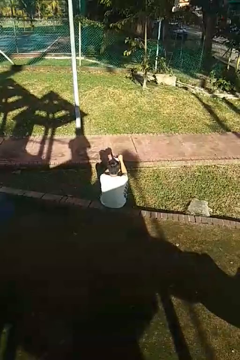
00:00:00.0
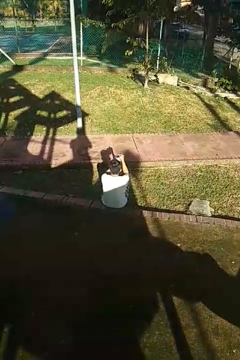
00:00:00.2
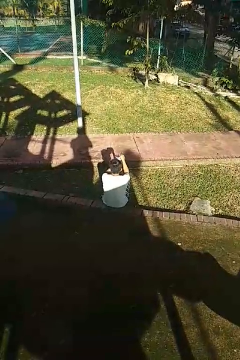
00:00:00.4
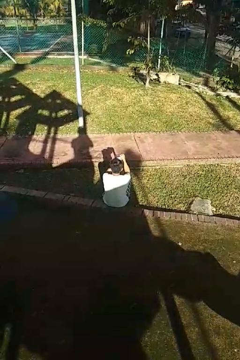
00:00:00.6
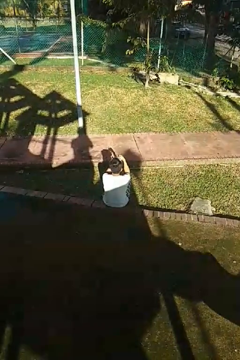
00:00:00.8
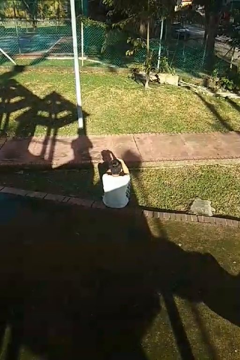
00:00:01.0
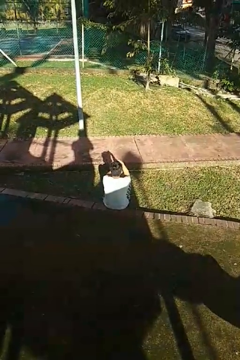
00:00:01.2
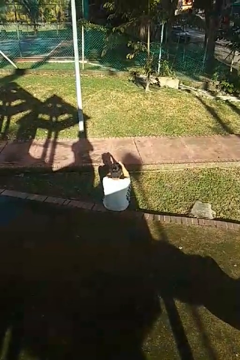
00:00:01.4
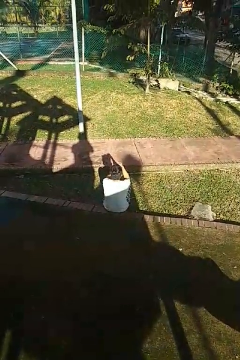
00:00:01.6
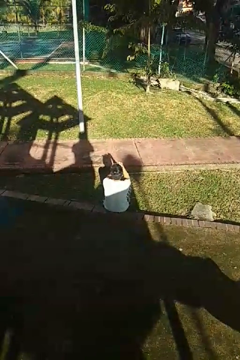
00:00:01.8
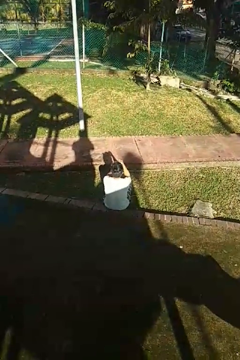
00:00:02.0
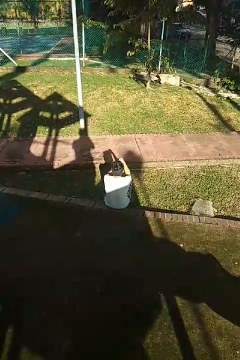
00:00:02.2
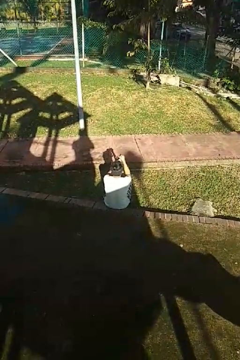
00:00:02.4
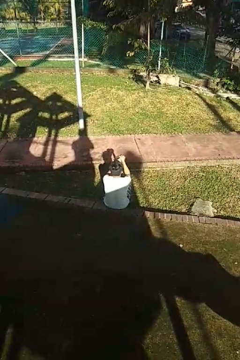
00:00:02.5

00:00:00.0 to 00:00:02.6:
person drinks from mug

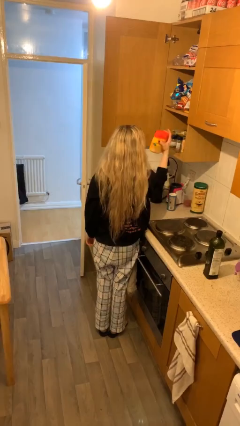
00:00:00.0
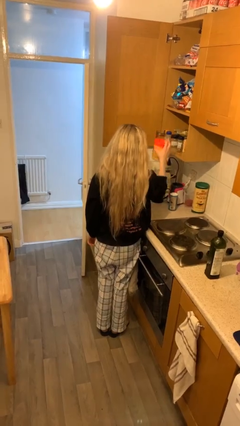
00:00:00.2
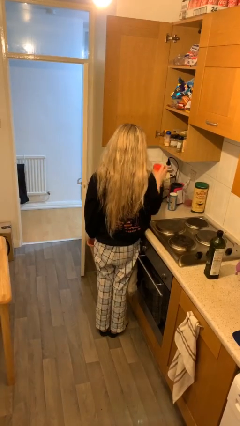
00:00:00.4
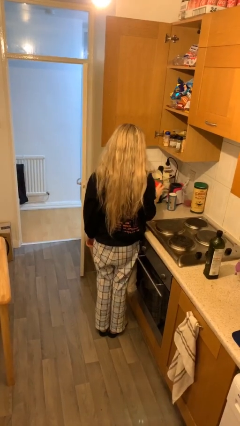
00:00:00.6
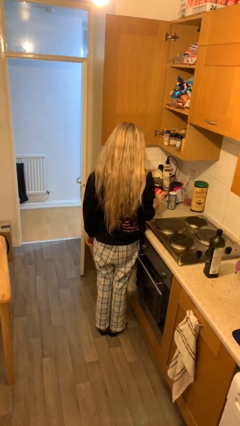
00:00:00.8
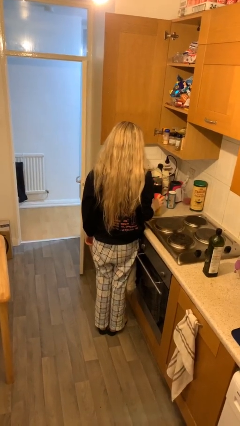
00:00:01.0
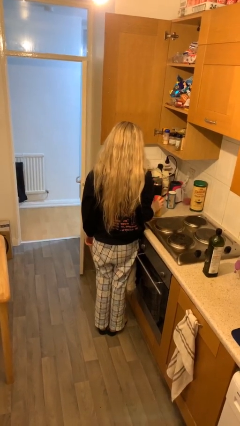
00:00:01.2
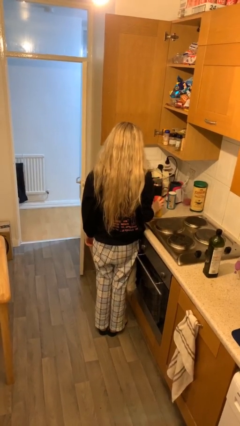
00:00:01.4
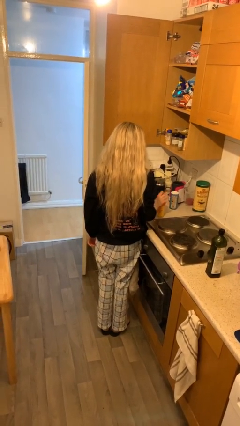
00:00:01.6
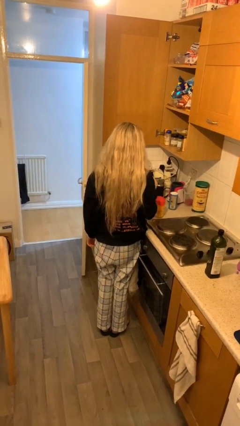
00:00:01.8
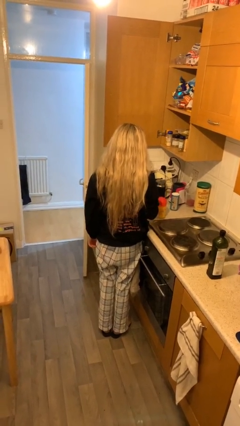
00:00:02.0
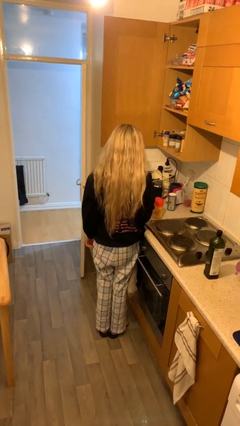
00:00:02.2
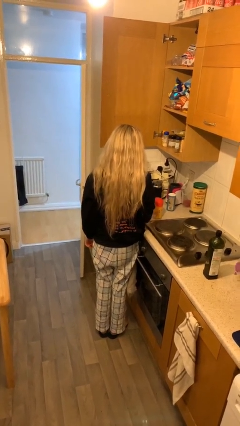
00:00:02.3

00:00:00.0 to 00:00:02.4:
person puts down object on table

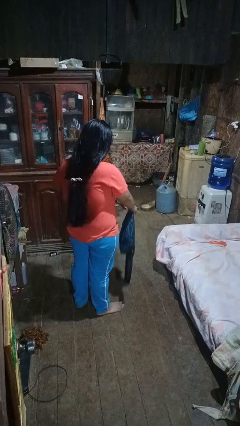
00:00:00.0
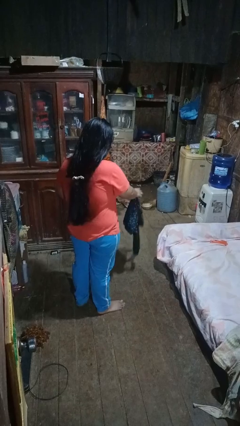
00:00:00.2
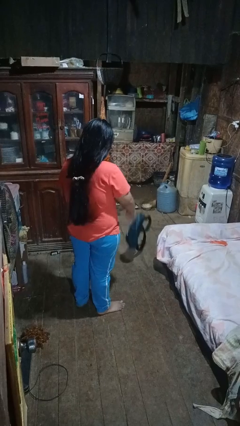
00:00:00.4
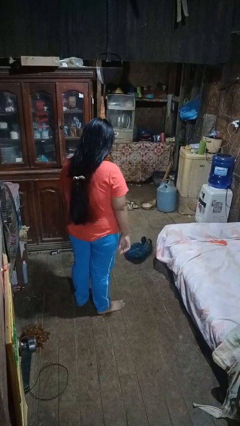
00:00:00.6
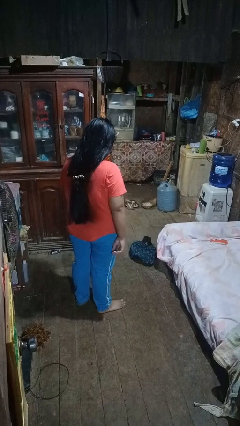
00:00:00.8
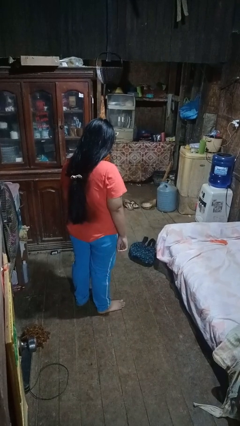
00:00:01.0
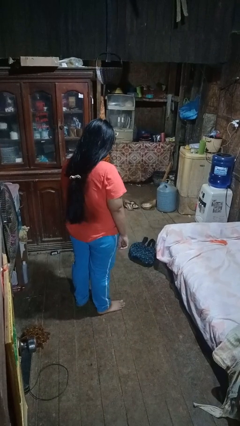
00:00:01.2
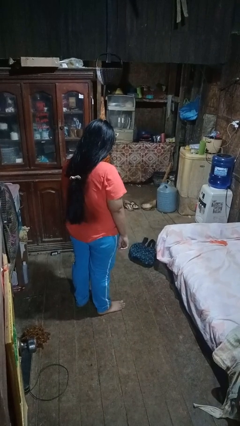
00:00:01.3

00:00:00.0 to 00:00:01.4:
person throws object to ground

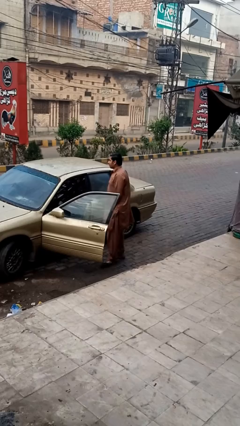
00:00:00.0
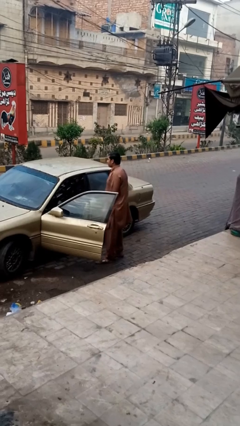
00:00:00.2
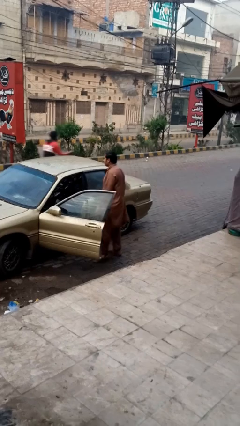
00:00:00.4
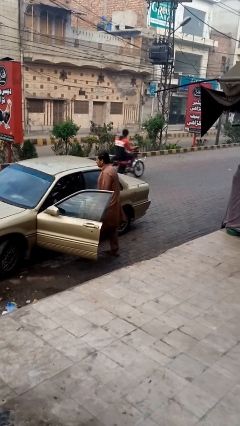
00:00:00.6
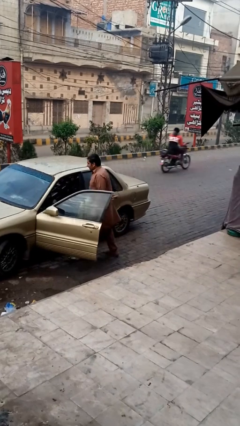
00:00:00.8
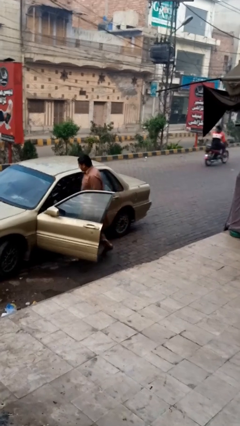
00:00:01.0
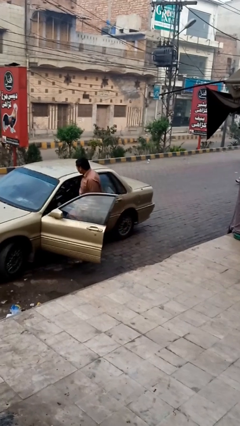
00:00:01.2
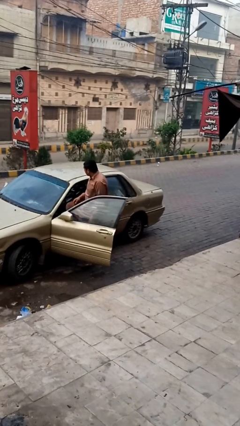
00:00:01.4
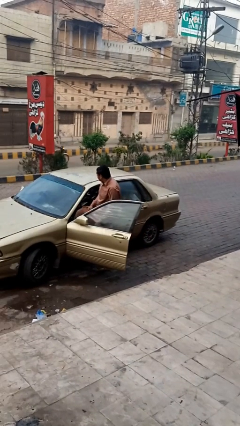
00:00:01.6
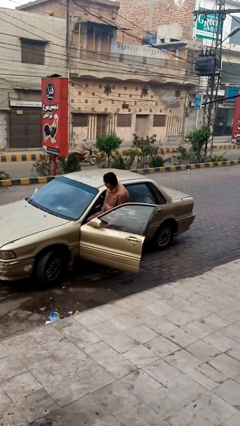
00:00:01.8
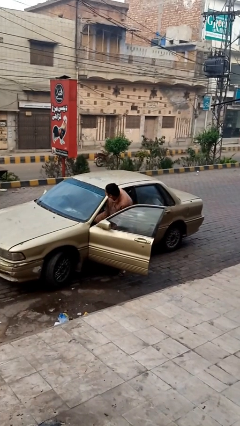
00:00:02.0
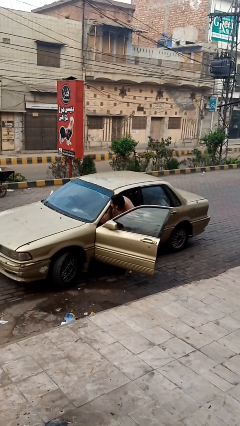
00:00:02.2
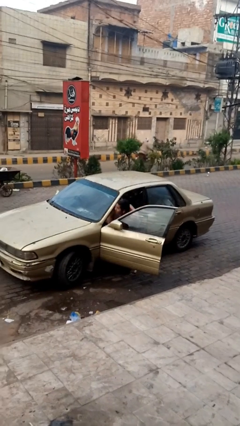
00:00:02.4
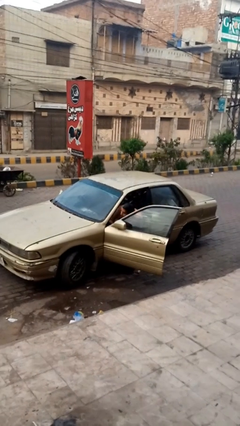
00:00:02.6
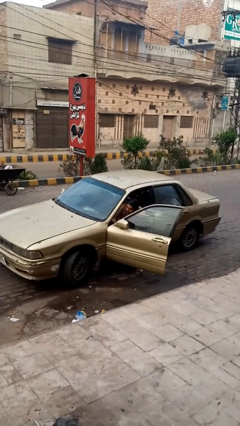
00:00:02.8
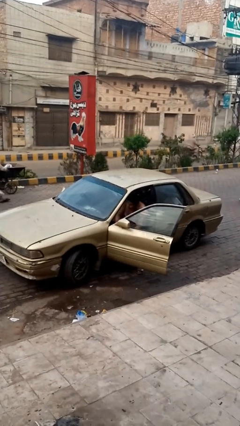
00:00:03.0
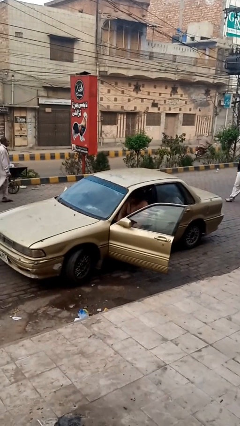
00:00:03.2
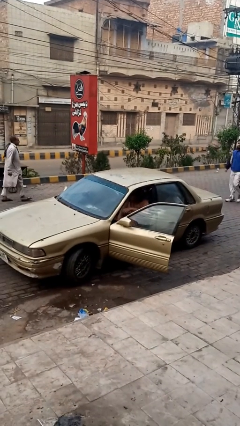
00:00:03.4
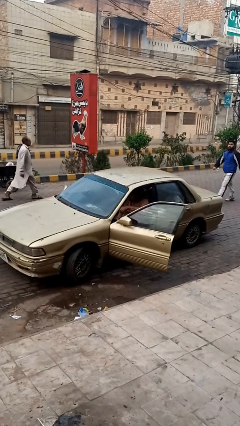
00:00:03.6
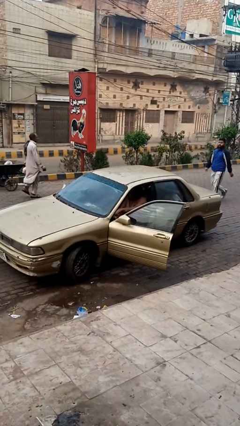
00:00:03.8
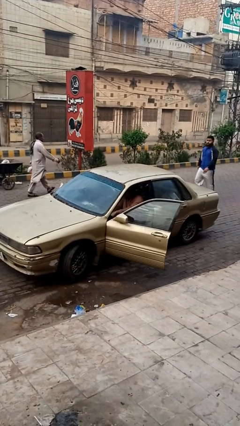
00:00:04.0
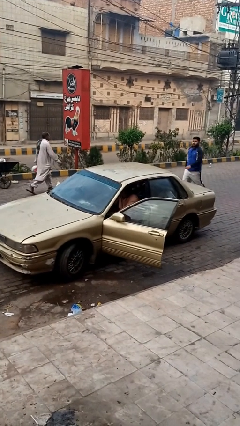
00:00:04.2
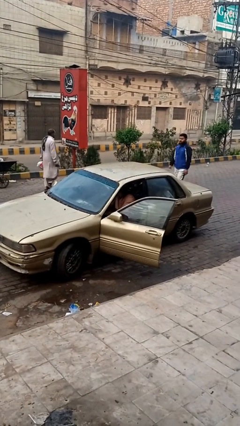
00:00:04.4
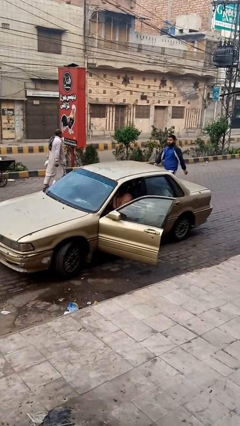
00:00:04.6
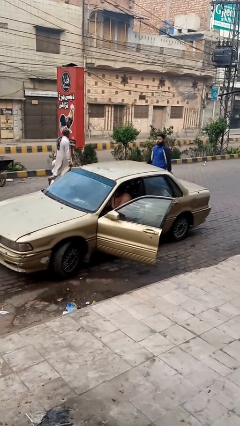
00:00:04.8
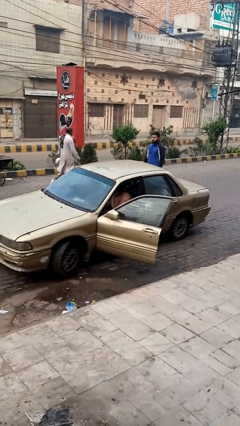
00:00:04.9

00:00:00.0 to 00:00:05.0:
person enters car

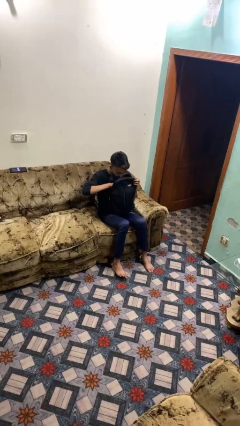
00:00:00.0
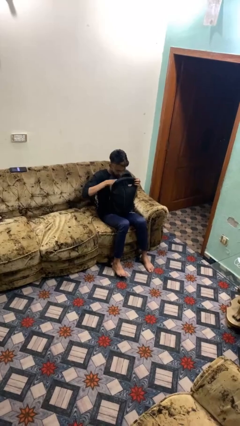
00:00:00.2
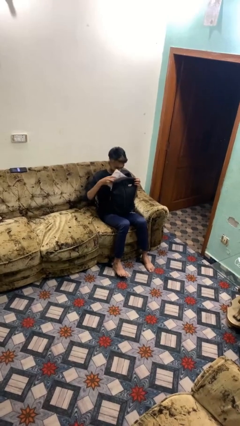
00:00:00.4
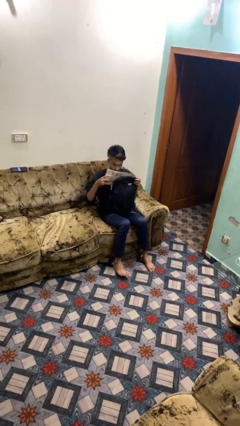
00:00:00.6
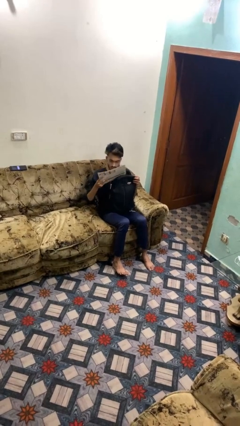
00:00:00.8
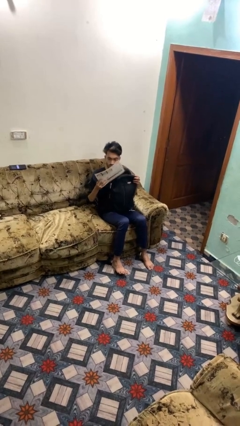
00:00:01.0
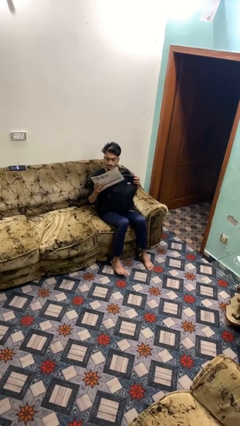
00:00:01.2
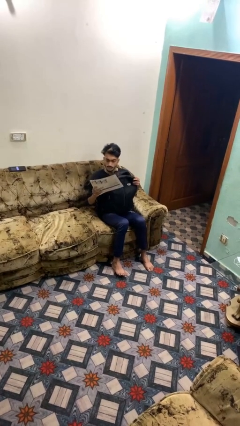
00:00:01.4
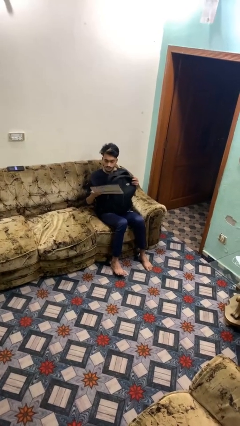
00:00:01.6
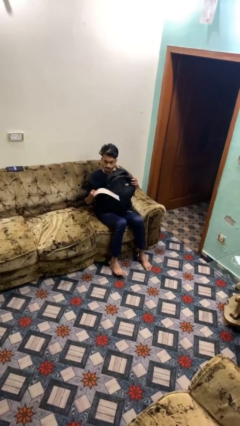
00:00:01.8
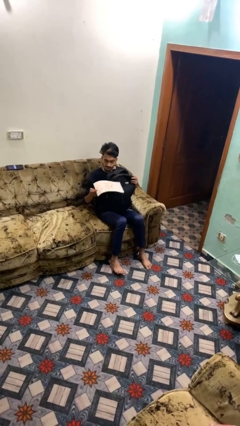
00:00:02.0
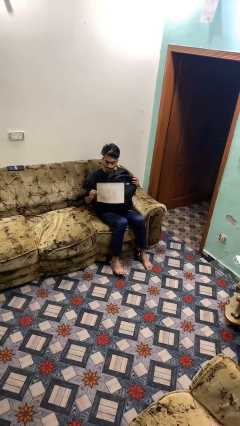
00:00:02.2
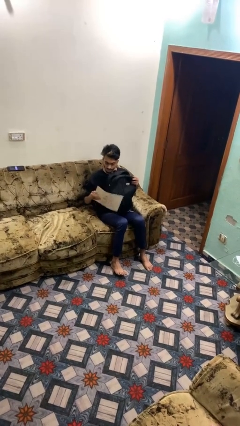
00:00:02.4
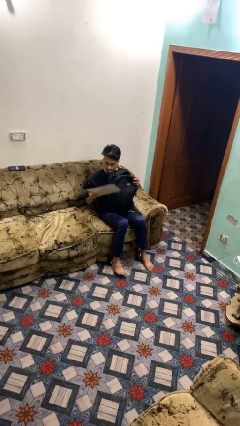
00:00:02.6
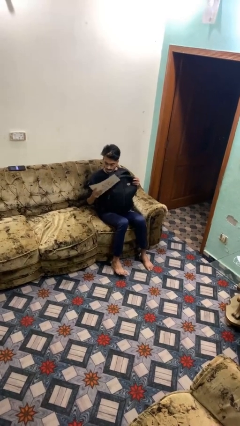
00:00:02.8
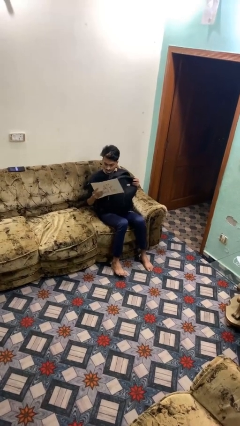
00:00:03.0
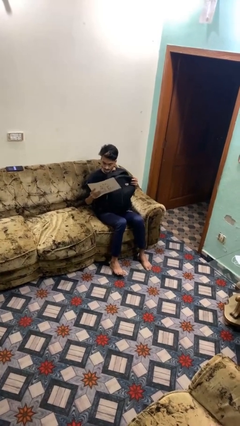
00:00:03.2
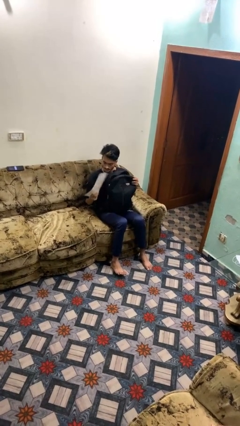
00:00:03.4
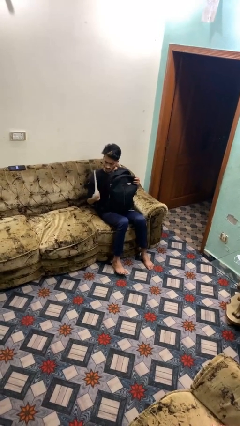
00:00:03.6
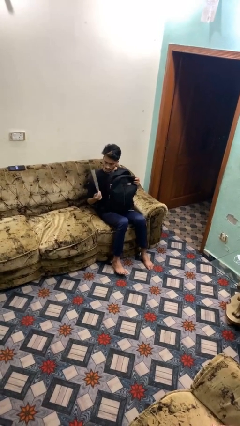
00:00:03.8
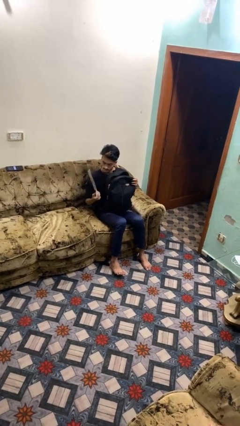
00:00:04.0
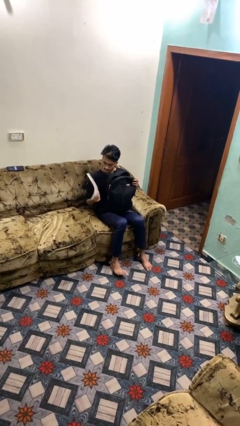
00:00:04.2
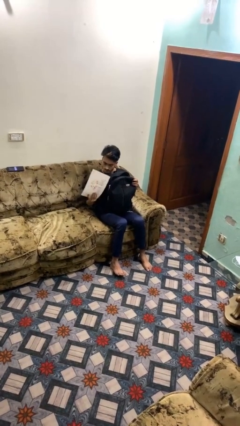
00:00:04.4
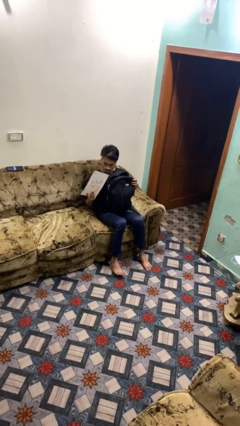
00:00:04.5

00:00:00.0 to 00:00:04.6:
person takes object from backpack

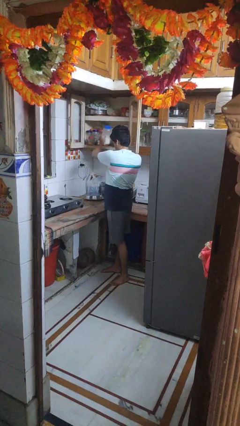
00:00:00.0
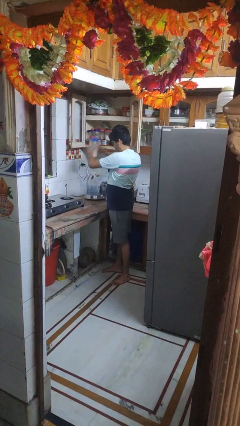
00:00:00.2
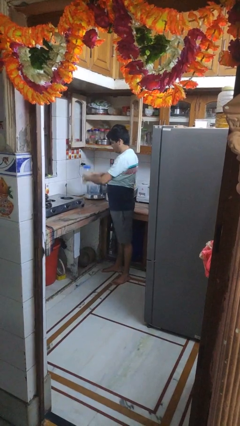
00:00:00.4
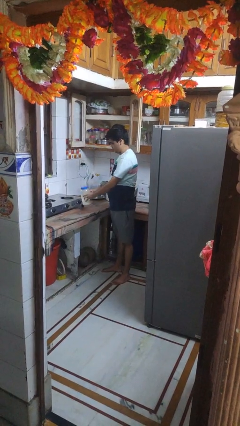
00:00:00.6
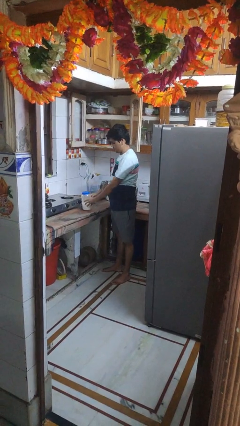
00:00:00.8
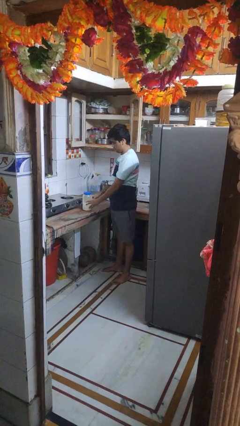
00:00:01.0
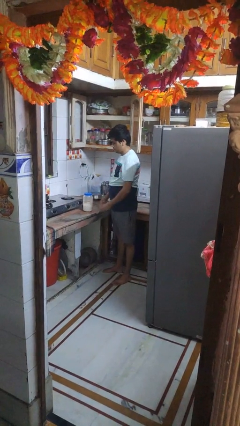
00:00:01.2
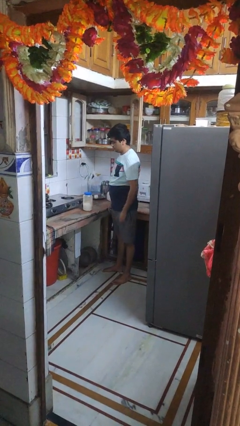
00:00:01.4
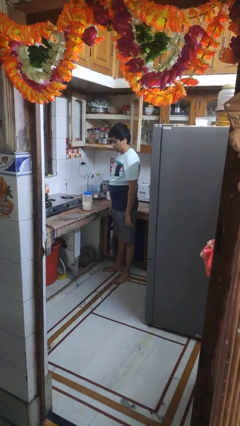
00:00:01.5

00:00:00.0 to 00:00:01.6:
person takes object from cabinet

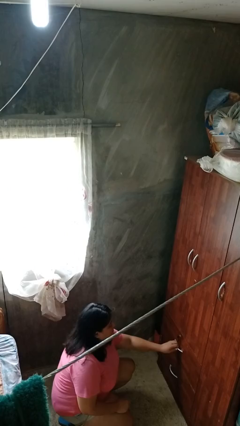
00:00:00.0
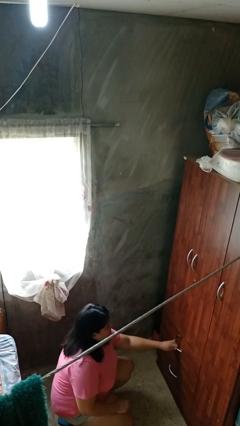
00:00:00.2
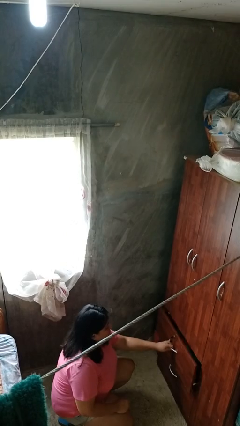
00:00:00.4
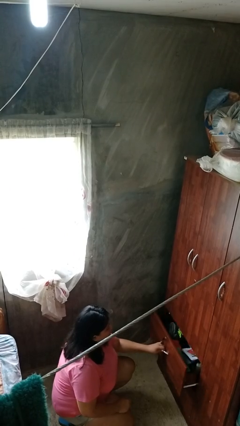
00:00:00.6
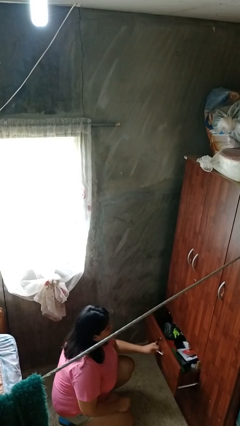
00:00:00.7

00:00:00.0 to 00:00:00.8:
person opens dresser drawer
